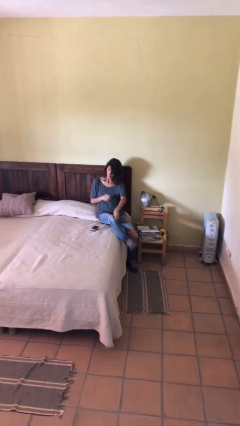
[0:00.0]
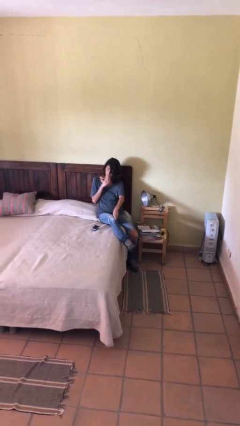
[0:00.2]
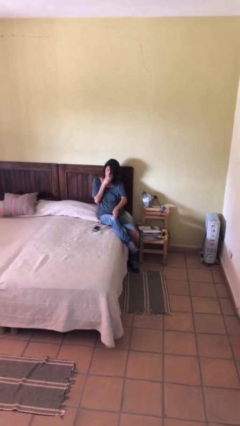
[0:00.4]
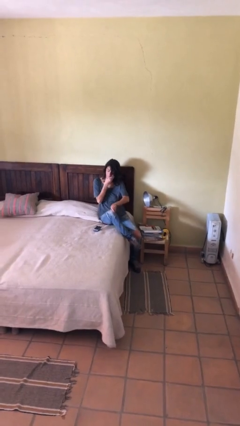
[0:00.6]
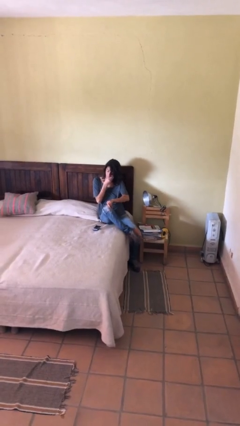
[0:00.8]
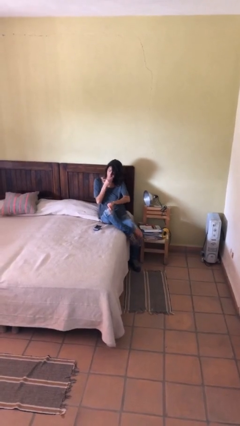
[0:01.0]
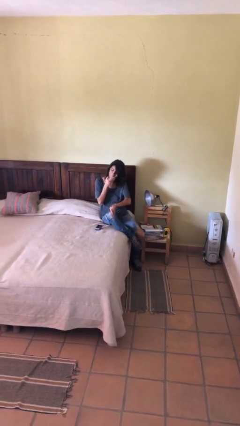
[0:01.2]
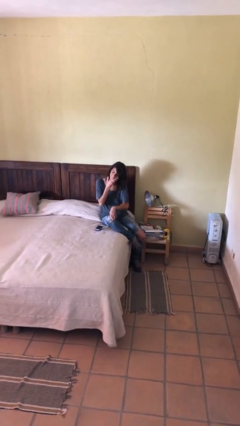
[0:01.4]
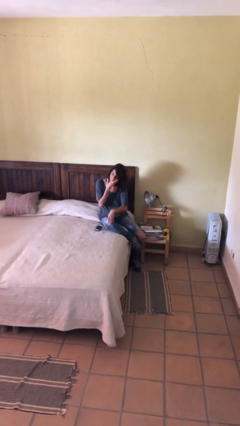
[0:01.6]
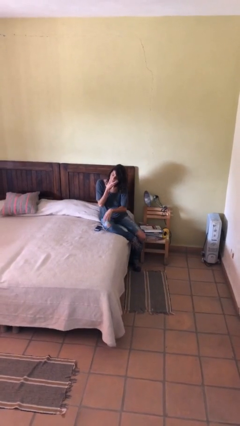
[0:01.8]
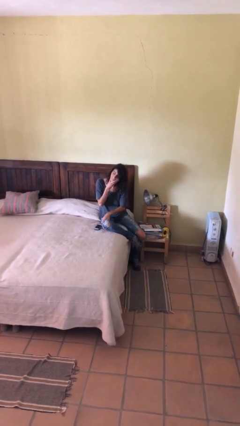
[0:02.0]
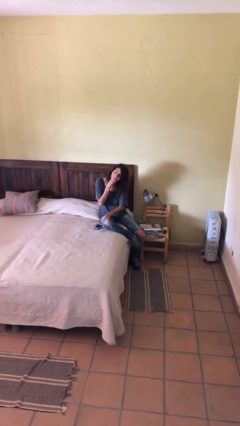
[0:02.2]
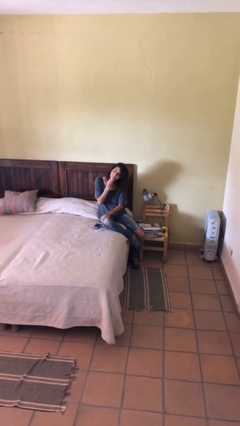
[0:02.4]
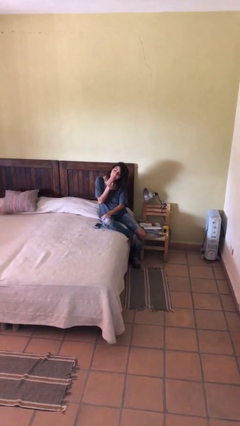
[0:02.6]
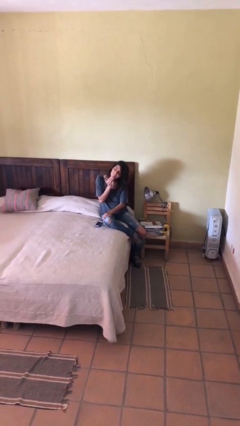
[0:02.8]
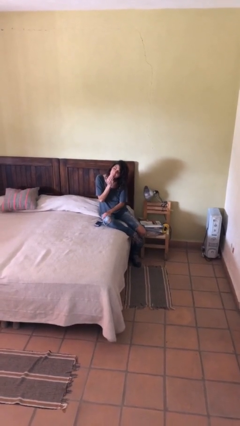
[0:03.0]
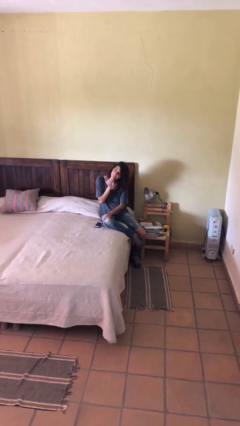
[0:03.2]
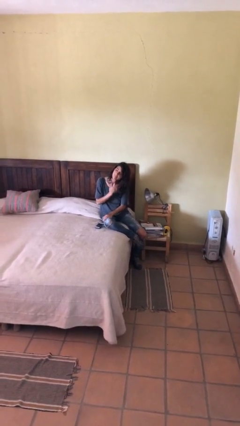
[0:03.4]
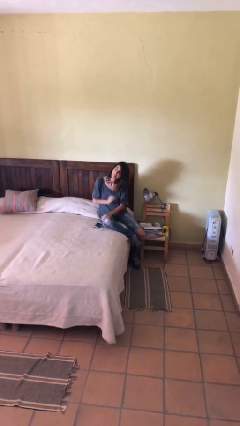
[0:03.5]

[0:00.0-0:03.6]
person strokes chin

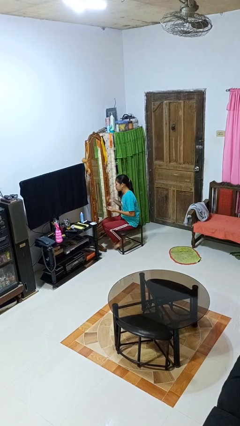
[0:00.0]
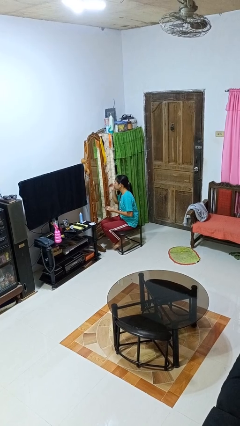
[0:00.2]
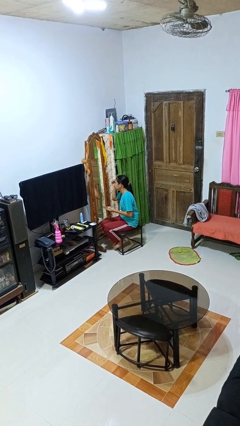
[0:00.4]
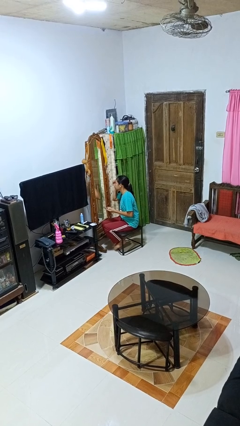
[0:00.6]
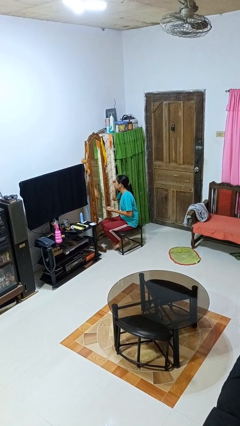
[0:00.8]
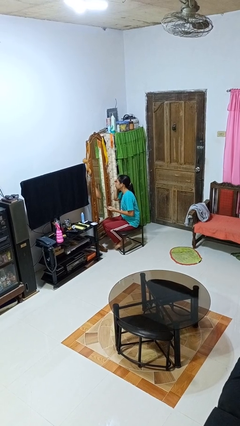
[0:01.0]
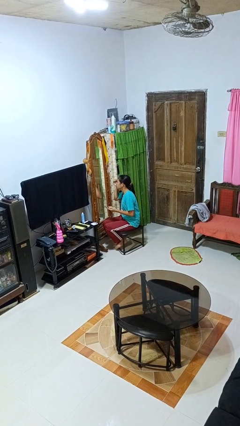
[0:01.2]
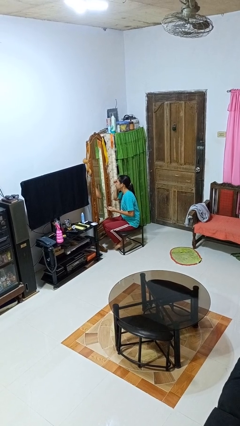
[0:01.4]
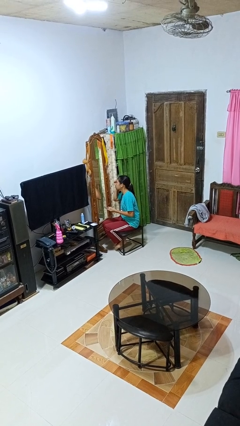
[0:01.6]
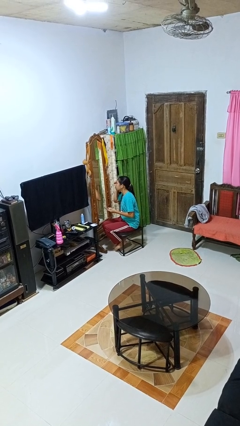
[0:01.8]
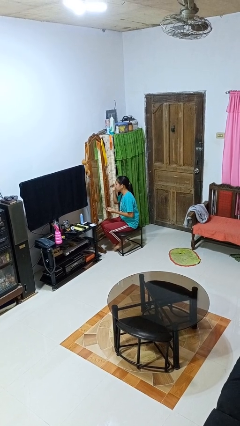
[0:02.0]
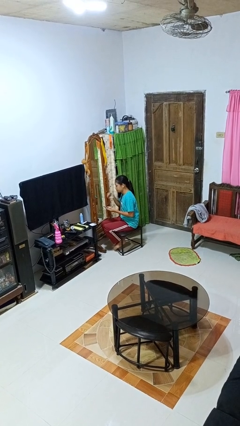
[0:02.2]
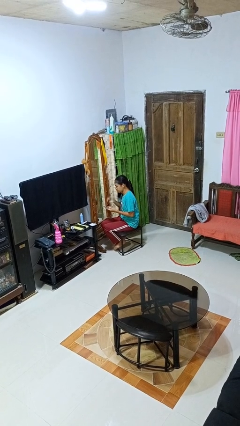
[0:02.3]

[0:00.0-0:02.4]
person applies eye makeup

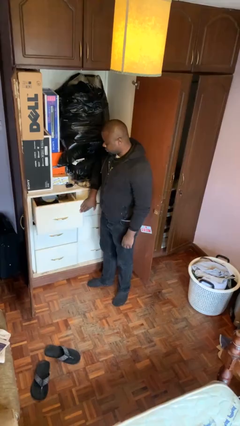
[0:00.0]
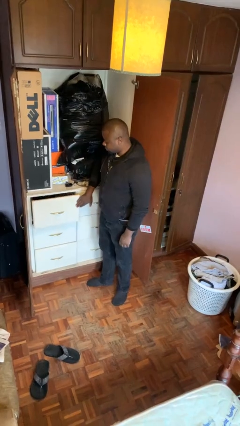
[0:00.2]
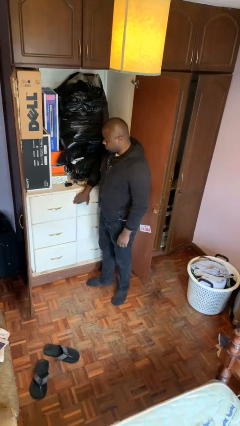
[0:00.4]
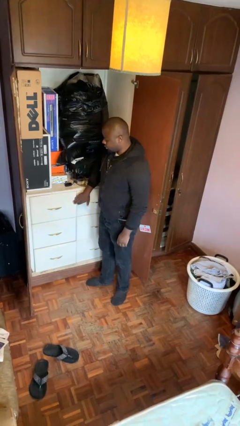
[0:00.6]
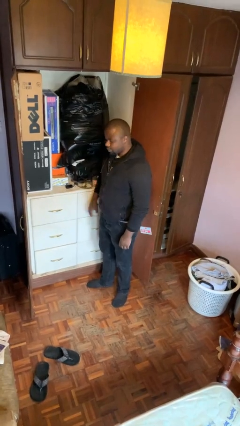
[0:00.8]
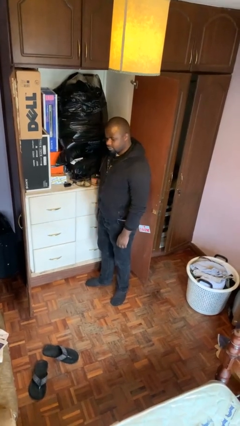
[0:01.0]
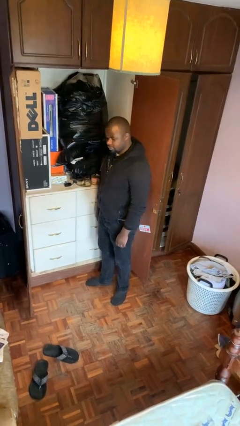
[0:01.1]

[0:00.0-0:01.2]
person closes dresser drawer

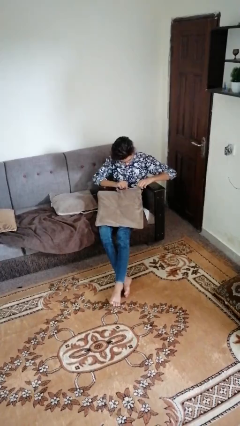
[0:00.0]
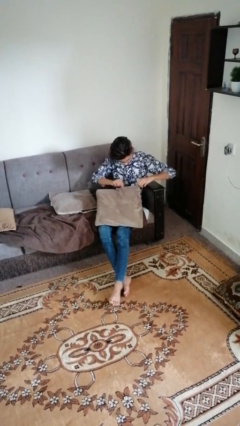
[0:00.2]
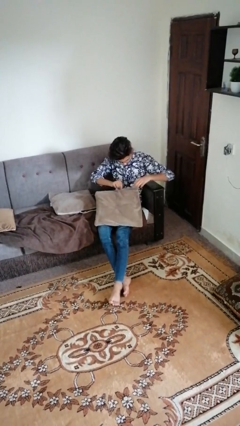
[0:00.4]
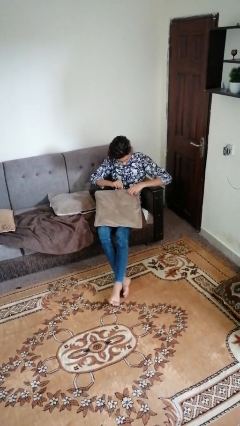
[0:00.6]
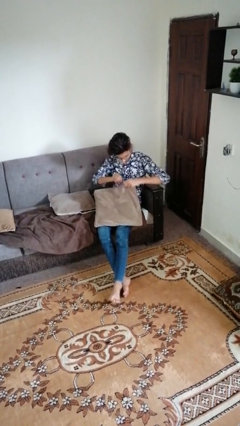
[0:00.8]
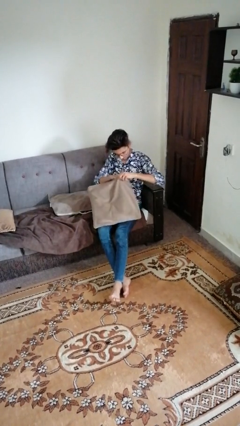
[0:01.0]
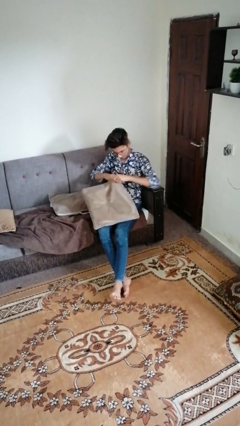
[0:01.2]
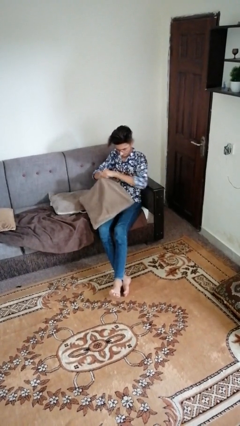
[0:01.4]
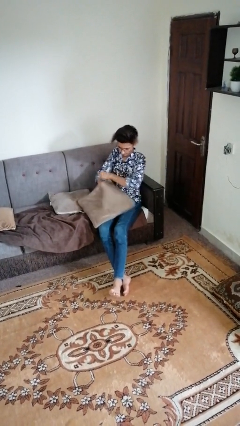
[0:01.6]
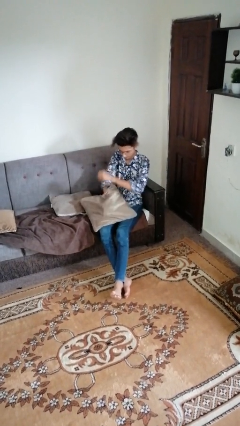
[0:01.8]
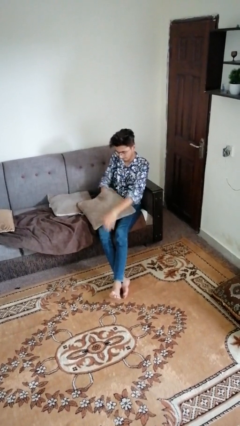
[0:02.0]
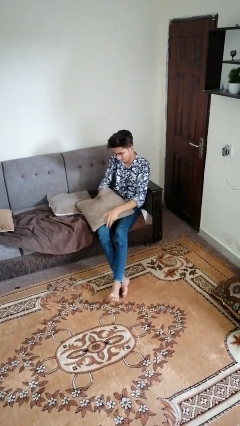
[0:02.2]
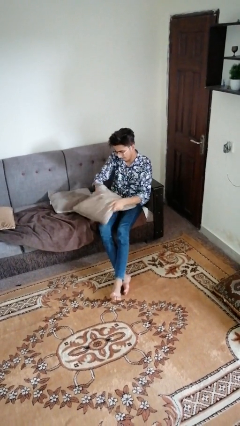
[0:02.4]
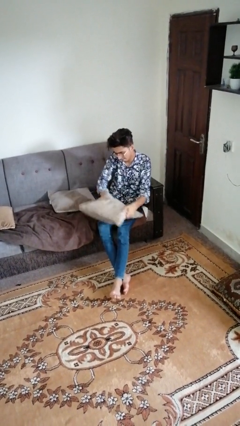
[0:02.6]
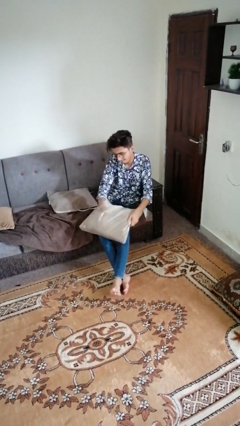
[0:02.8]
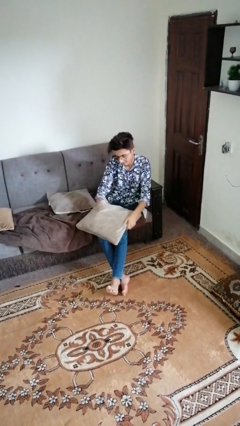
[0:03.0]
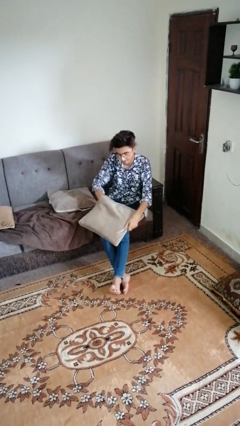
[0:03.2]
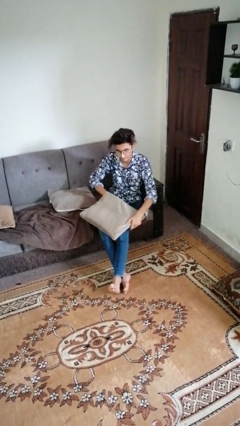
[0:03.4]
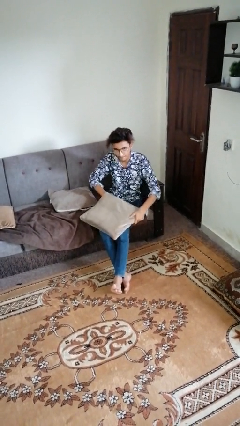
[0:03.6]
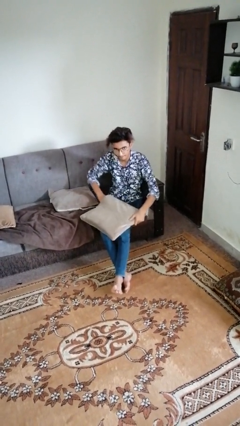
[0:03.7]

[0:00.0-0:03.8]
person searches in couch

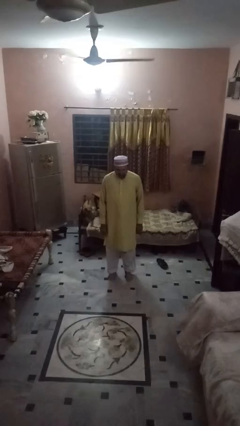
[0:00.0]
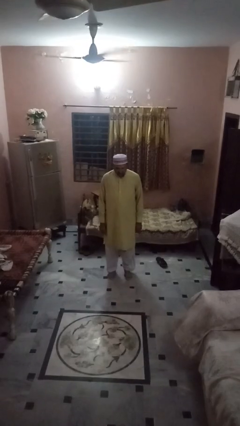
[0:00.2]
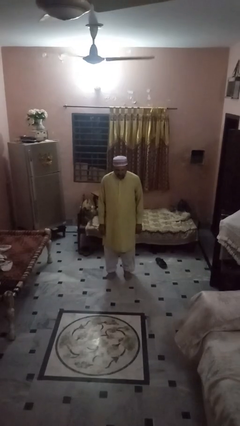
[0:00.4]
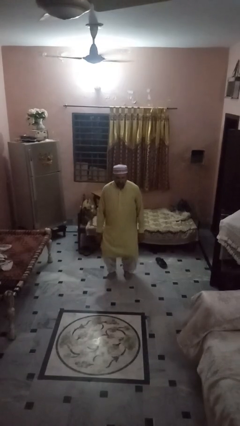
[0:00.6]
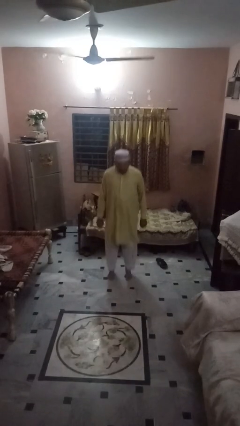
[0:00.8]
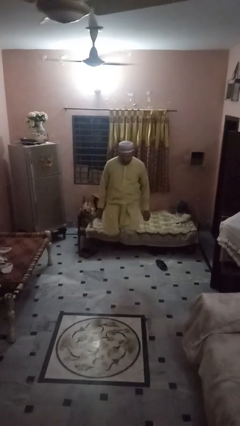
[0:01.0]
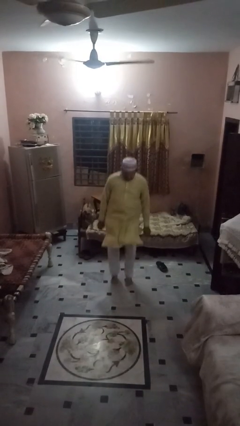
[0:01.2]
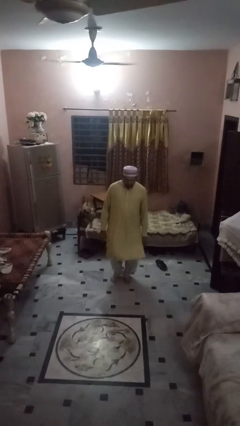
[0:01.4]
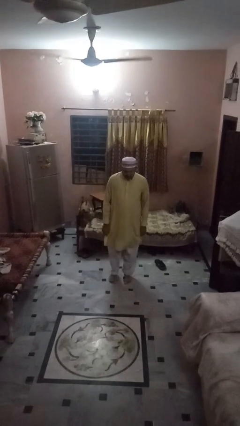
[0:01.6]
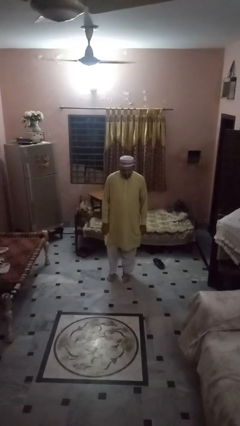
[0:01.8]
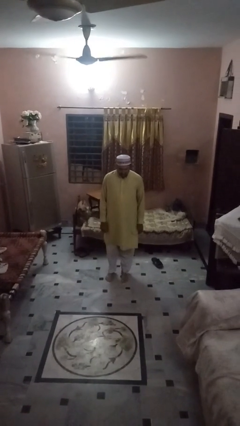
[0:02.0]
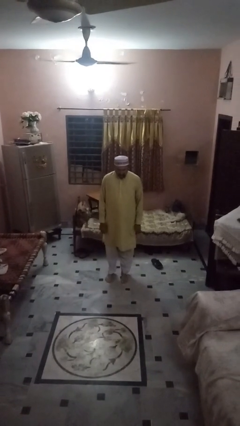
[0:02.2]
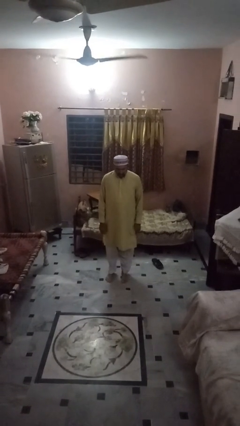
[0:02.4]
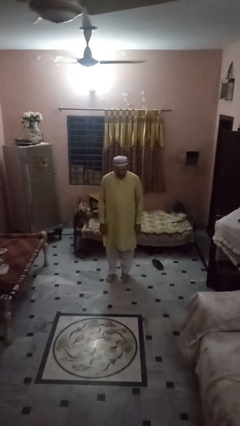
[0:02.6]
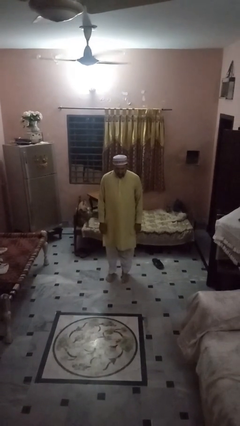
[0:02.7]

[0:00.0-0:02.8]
person jumps

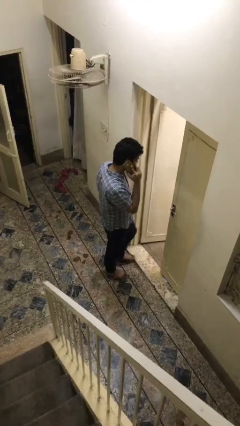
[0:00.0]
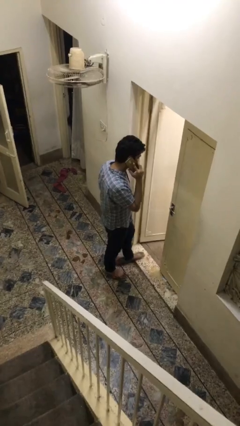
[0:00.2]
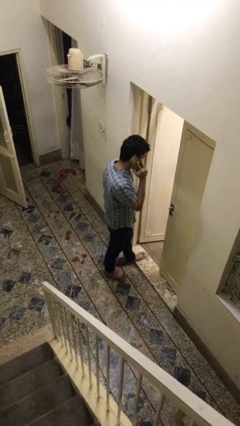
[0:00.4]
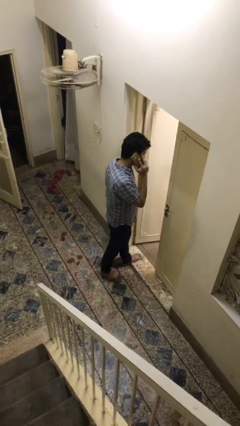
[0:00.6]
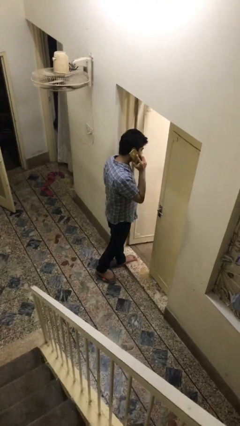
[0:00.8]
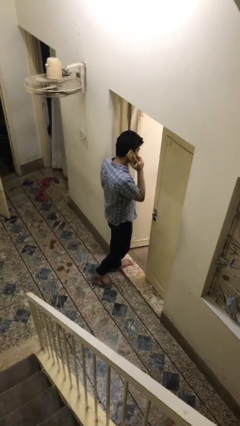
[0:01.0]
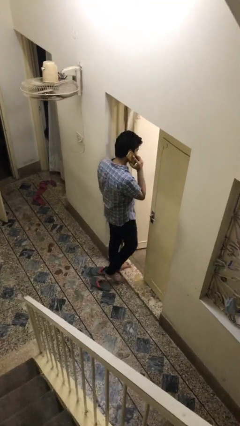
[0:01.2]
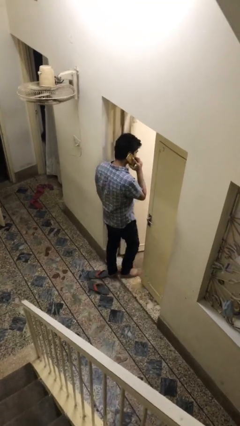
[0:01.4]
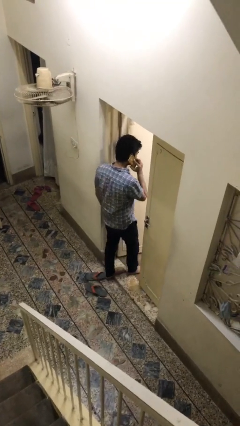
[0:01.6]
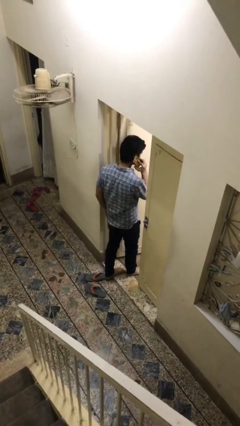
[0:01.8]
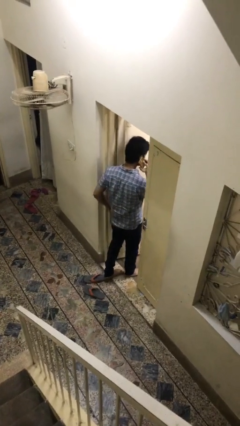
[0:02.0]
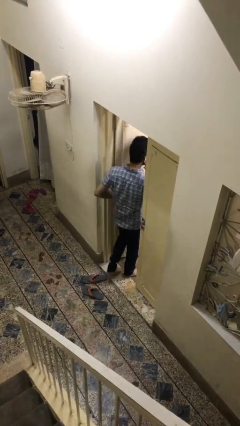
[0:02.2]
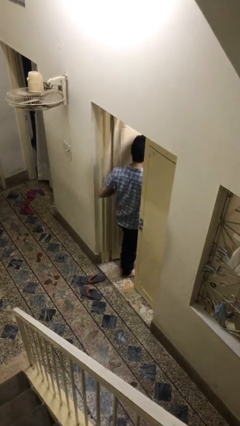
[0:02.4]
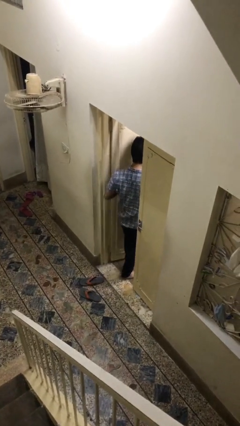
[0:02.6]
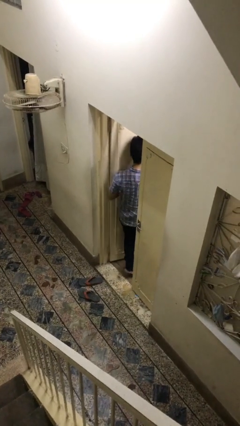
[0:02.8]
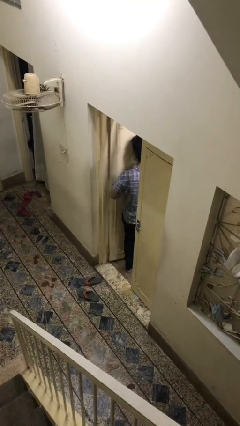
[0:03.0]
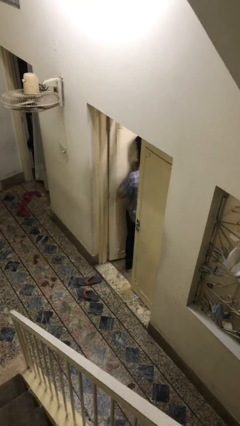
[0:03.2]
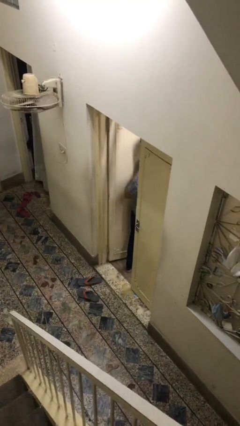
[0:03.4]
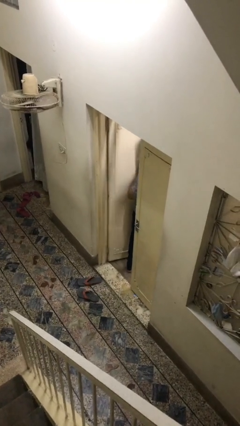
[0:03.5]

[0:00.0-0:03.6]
person exits scene through structure

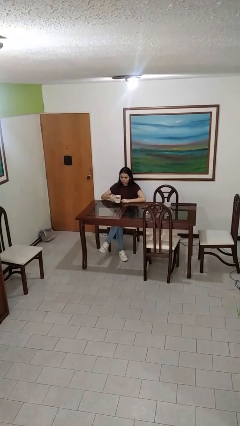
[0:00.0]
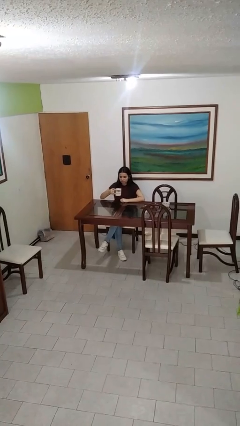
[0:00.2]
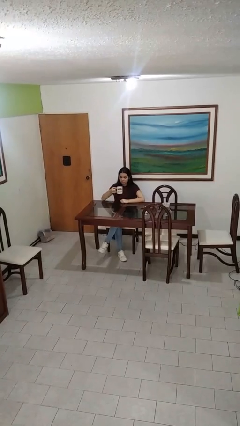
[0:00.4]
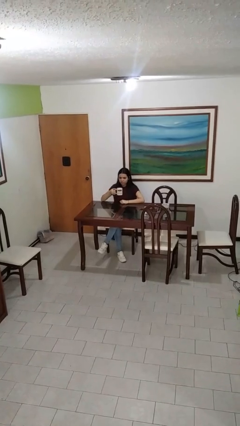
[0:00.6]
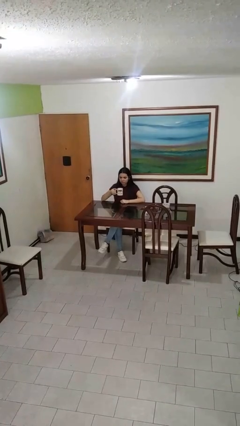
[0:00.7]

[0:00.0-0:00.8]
person picks up object from table
